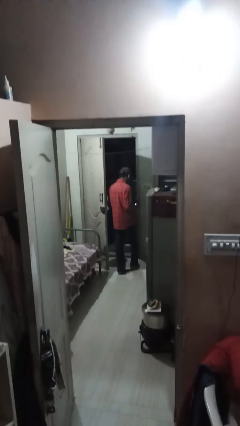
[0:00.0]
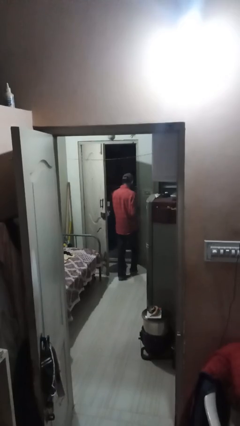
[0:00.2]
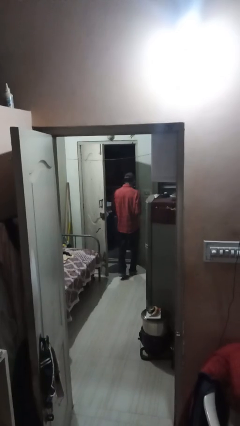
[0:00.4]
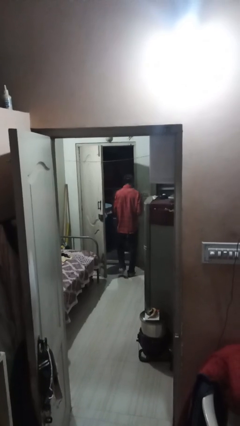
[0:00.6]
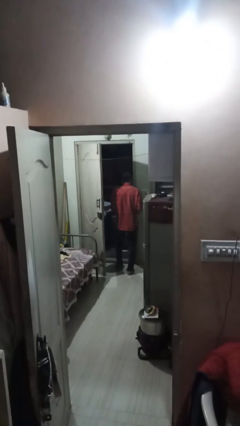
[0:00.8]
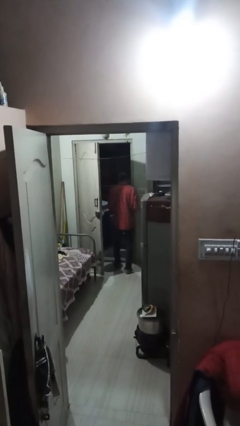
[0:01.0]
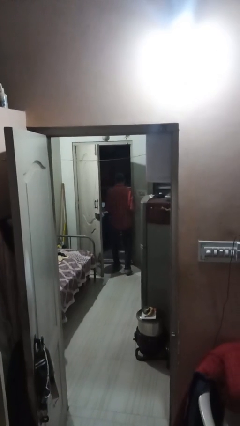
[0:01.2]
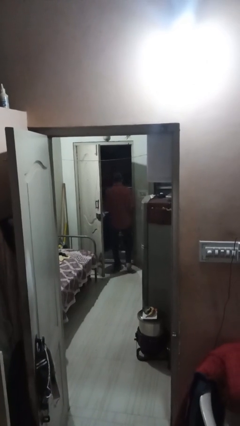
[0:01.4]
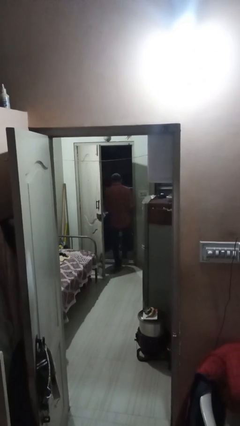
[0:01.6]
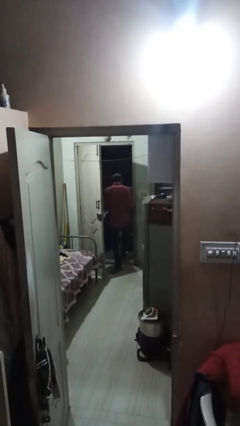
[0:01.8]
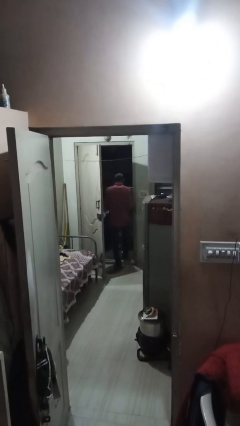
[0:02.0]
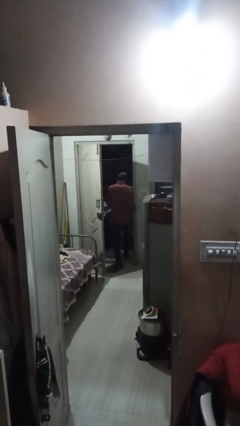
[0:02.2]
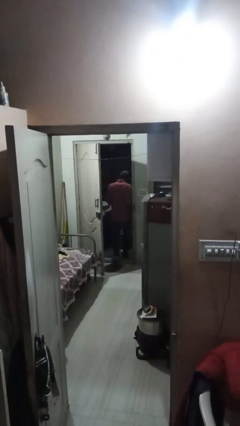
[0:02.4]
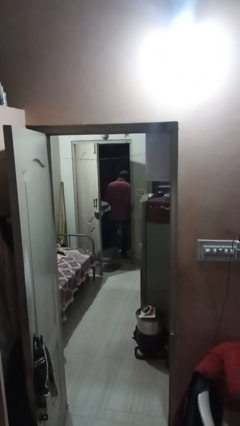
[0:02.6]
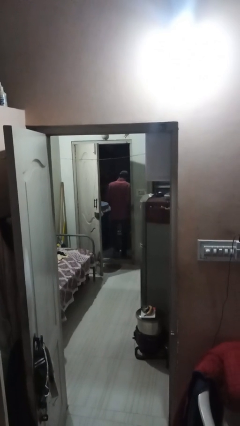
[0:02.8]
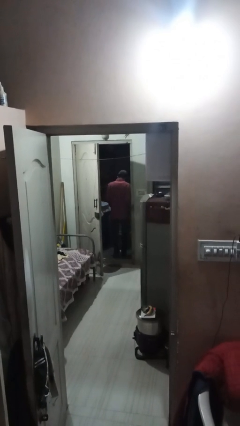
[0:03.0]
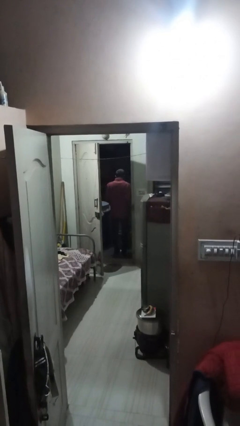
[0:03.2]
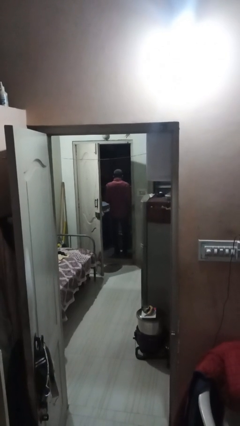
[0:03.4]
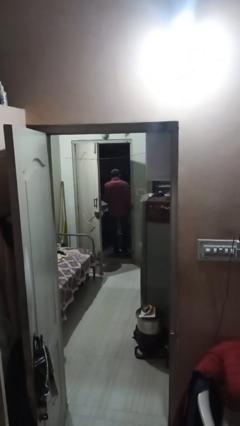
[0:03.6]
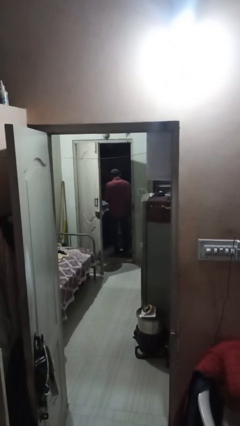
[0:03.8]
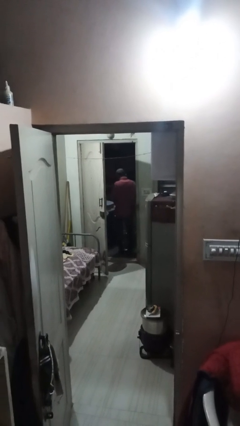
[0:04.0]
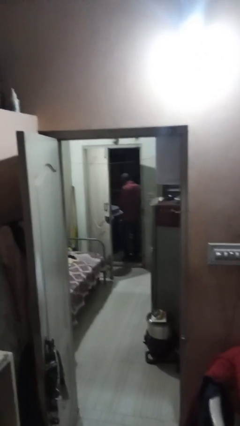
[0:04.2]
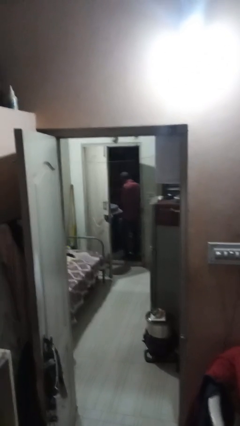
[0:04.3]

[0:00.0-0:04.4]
person exits scene through structure

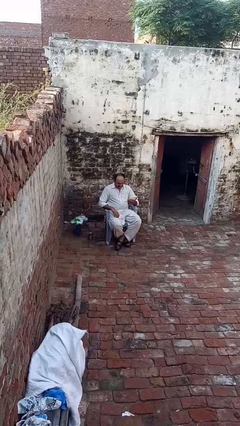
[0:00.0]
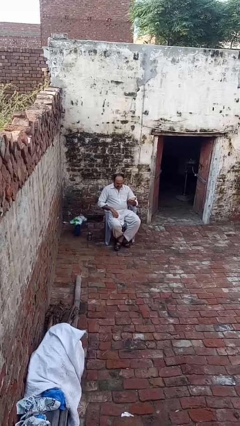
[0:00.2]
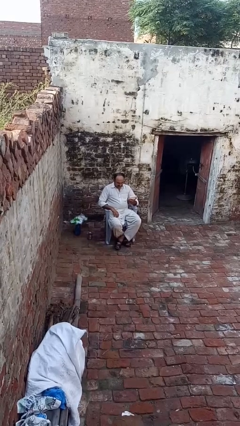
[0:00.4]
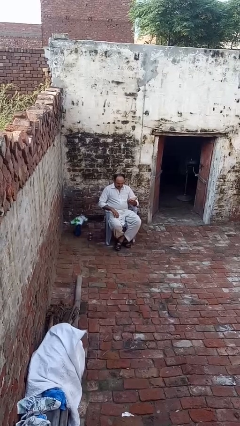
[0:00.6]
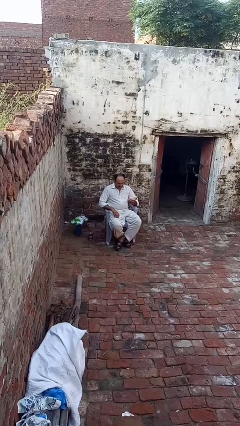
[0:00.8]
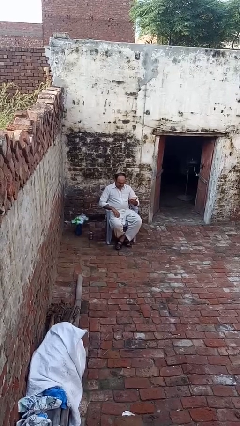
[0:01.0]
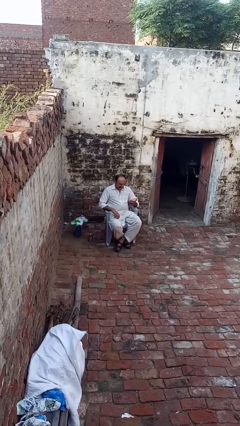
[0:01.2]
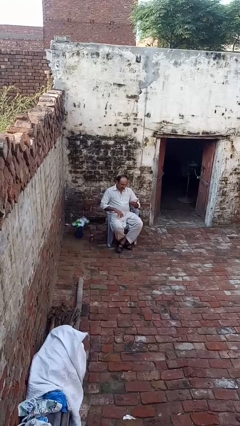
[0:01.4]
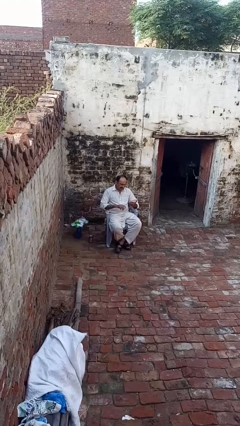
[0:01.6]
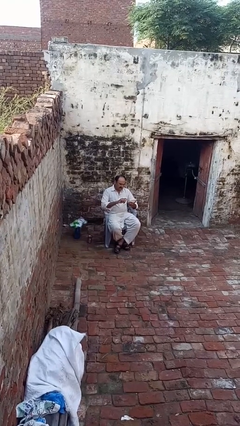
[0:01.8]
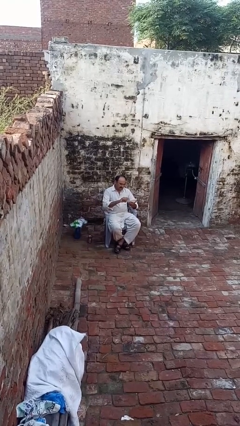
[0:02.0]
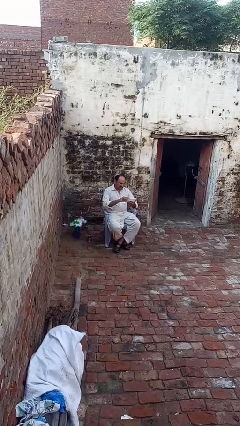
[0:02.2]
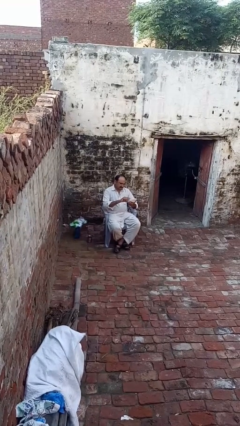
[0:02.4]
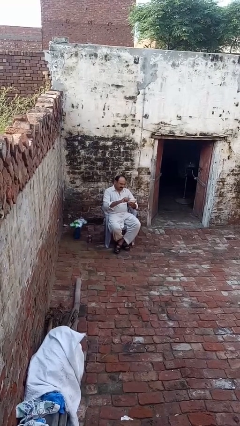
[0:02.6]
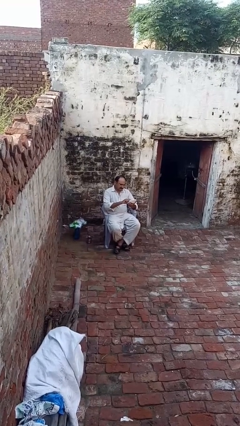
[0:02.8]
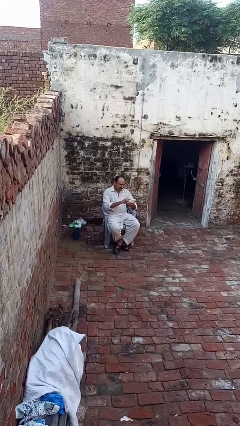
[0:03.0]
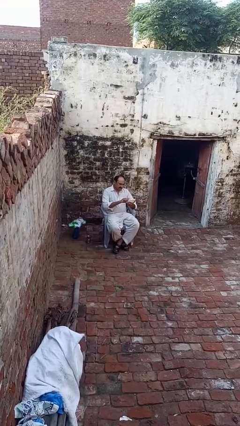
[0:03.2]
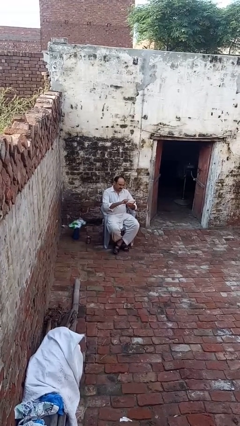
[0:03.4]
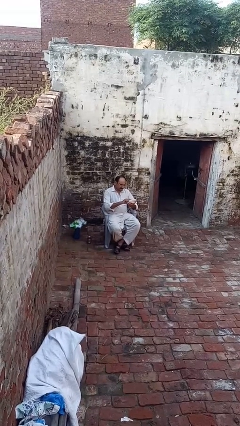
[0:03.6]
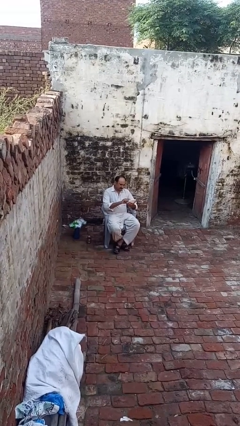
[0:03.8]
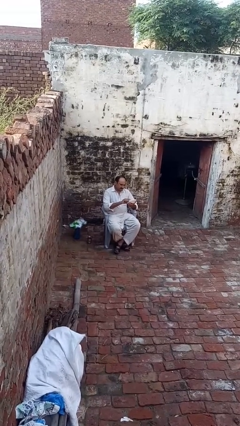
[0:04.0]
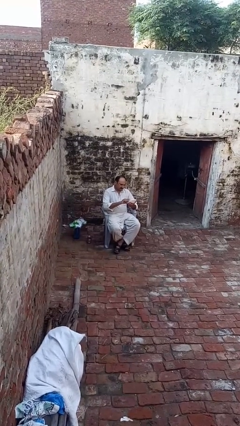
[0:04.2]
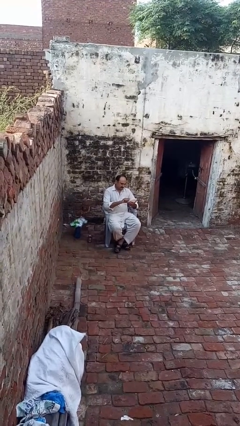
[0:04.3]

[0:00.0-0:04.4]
person interacts with tablet

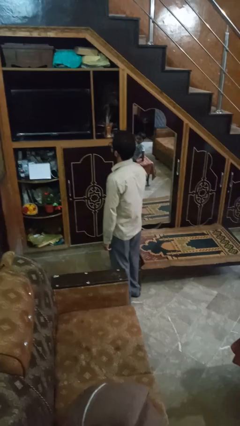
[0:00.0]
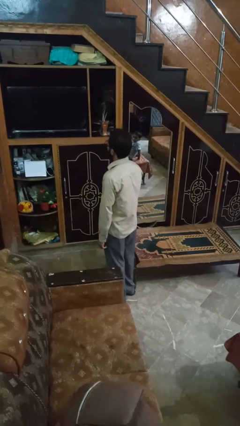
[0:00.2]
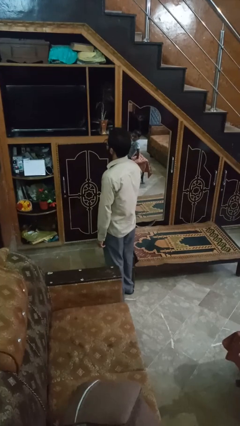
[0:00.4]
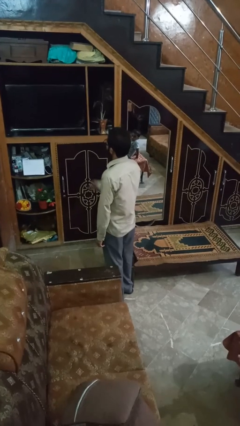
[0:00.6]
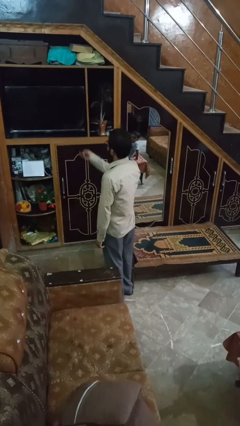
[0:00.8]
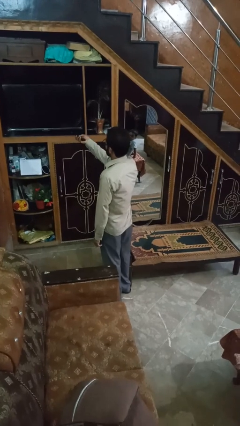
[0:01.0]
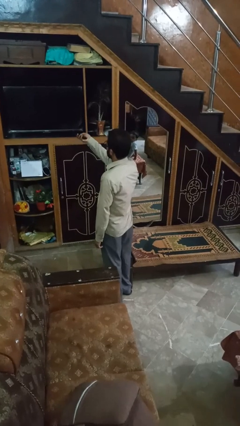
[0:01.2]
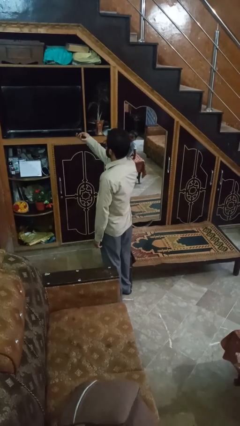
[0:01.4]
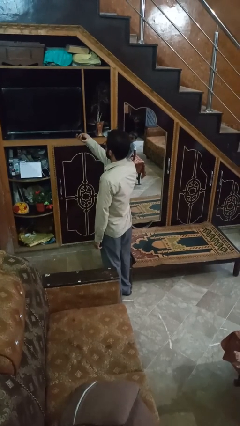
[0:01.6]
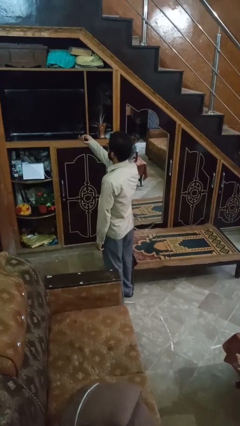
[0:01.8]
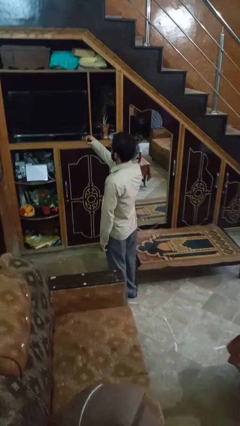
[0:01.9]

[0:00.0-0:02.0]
person uses television remote

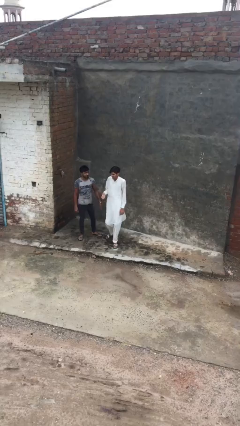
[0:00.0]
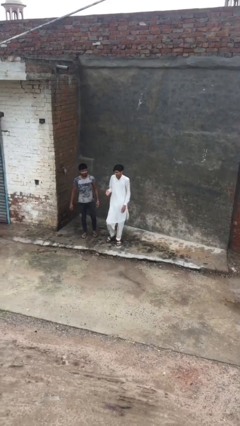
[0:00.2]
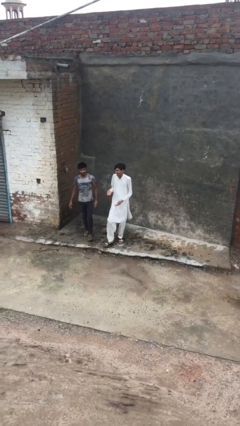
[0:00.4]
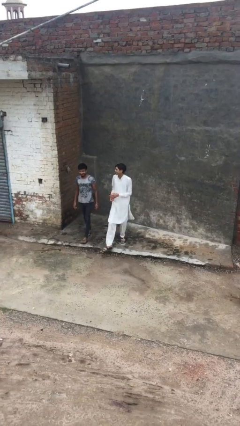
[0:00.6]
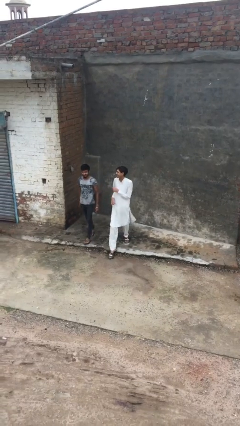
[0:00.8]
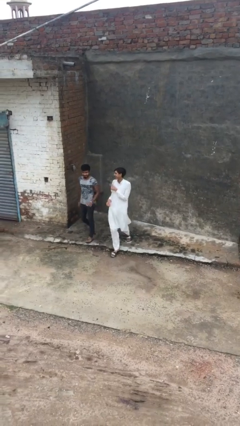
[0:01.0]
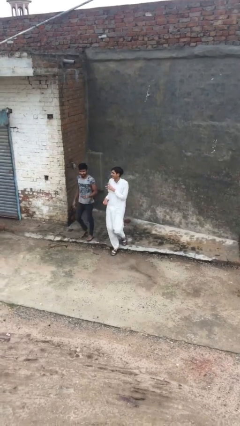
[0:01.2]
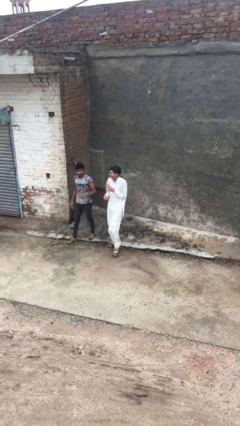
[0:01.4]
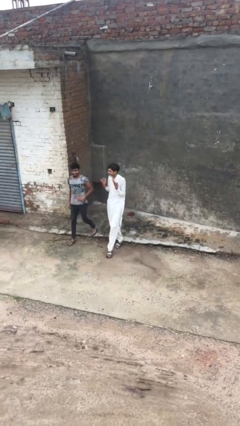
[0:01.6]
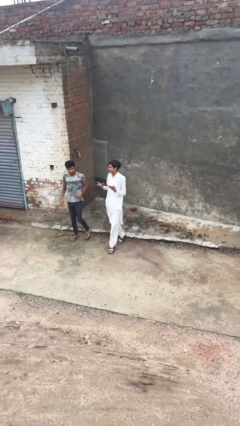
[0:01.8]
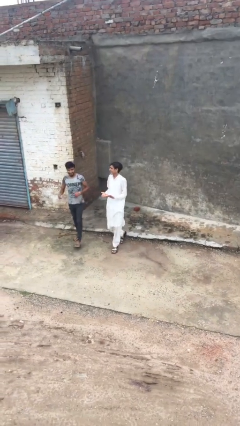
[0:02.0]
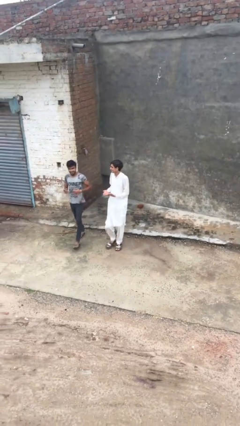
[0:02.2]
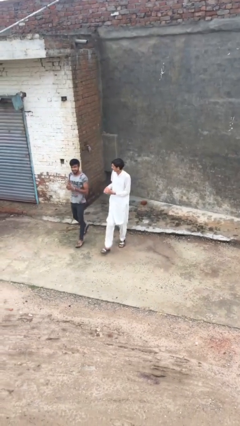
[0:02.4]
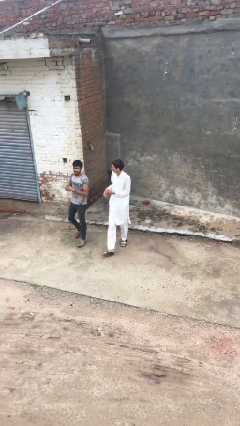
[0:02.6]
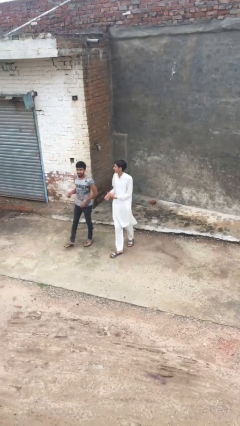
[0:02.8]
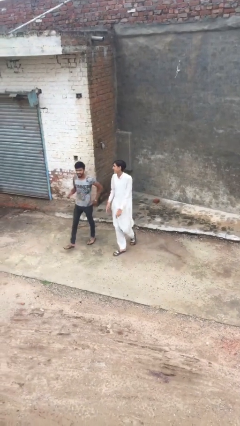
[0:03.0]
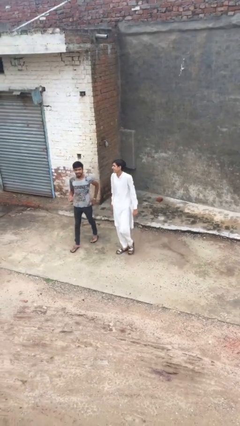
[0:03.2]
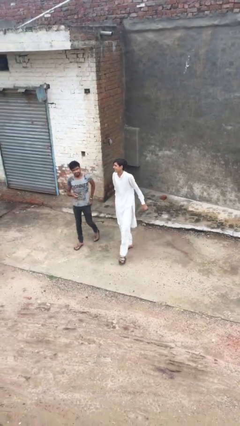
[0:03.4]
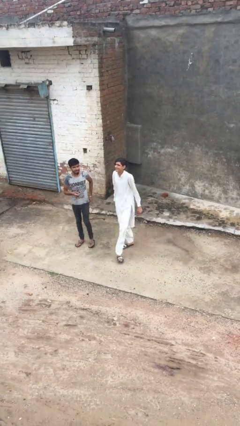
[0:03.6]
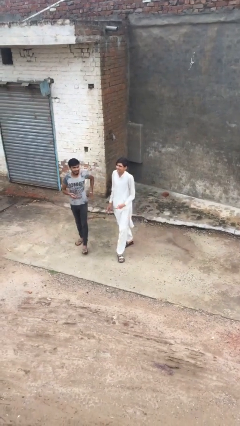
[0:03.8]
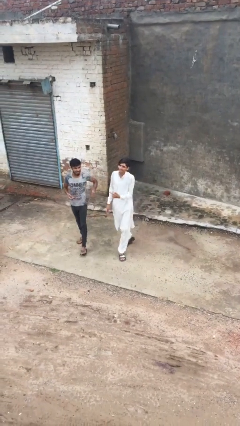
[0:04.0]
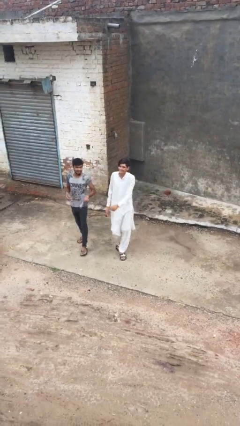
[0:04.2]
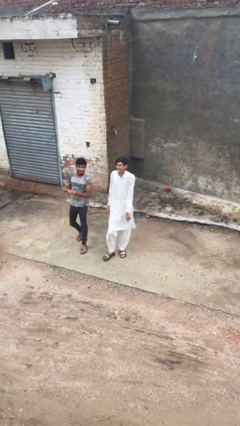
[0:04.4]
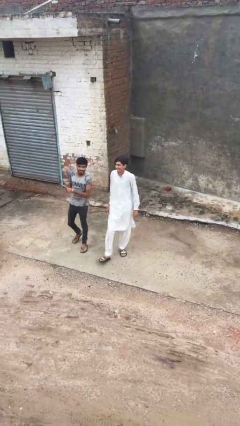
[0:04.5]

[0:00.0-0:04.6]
person talks to person

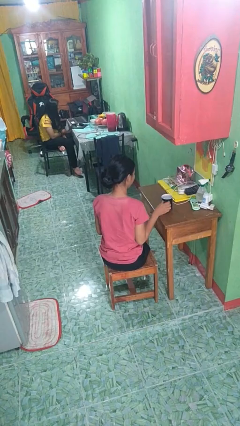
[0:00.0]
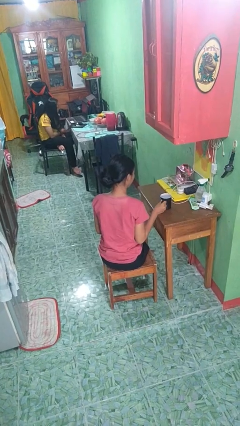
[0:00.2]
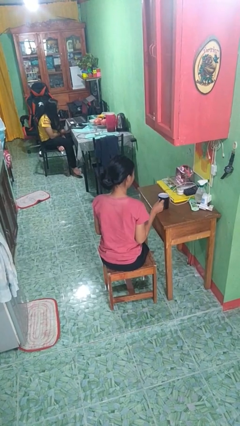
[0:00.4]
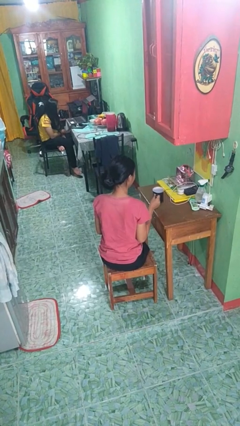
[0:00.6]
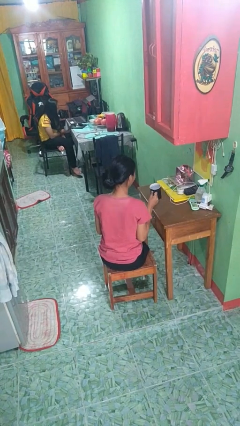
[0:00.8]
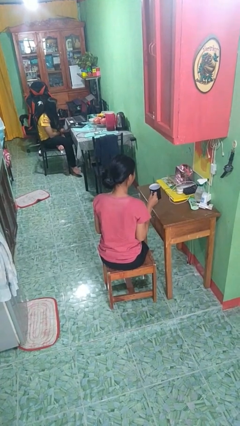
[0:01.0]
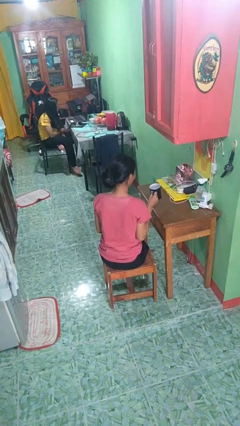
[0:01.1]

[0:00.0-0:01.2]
person picks up object from table

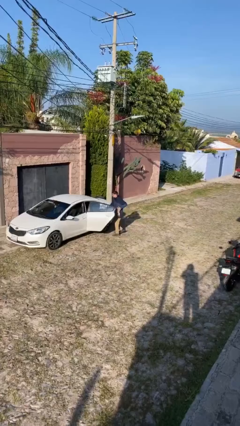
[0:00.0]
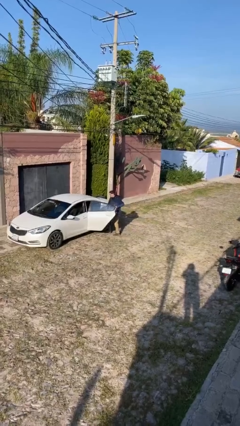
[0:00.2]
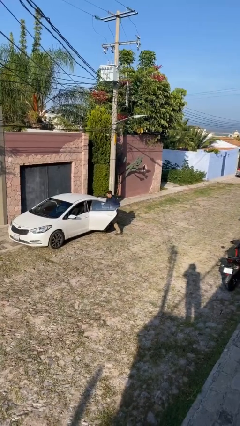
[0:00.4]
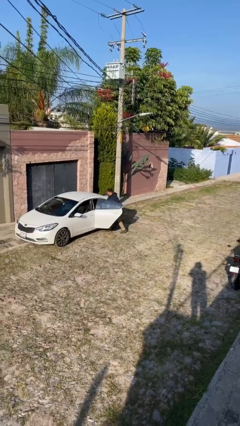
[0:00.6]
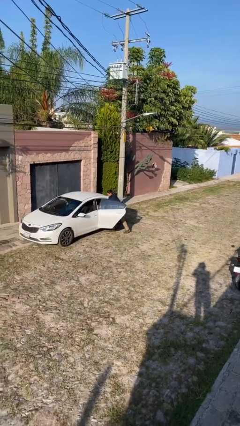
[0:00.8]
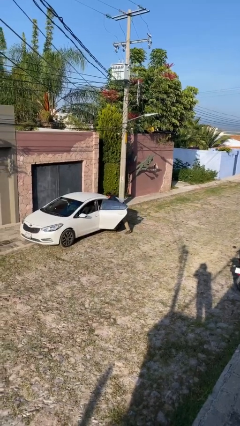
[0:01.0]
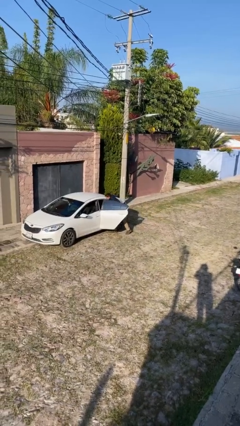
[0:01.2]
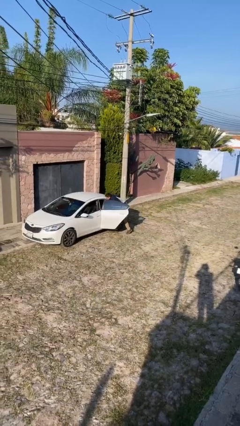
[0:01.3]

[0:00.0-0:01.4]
person loads car
